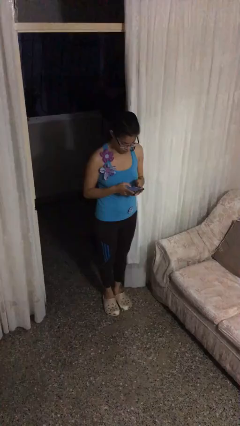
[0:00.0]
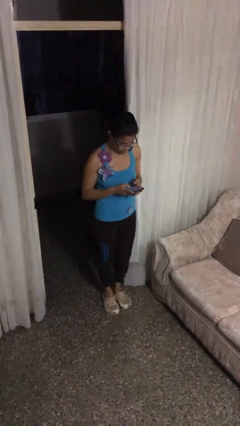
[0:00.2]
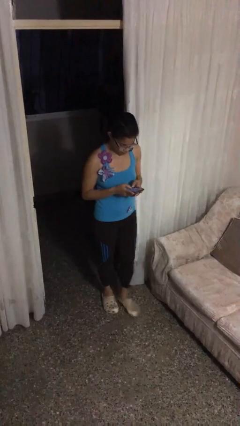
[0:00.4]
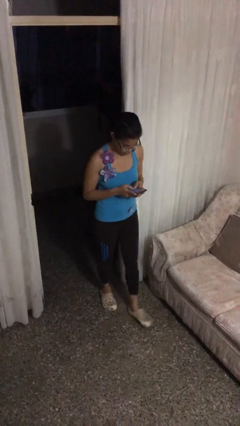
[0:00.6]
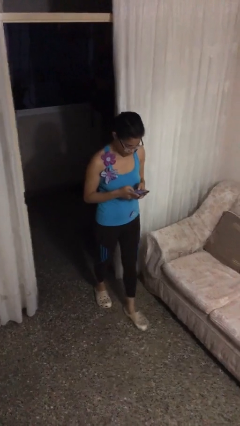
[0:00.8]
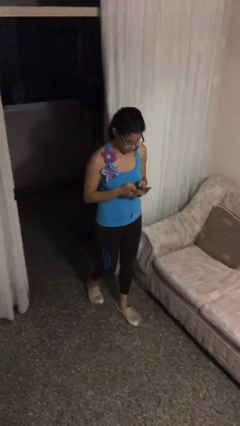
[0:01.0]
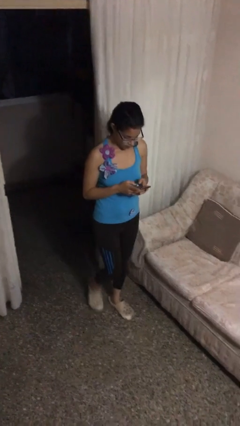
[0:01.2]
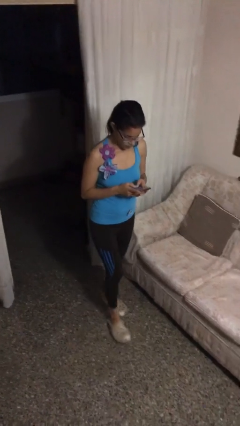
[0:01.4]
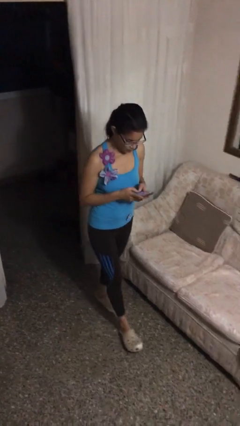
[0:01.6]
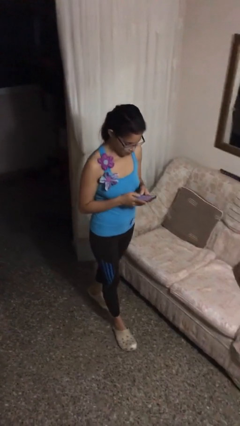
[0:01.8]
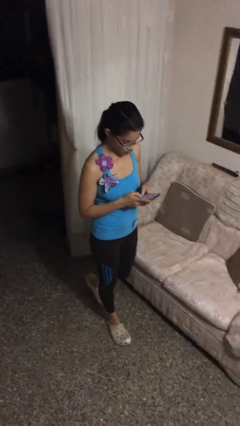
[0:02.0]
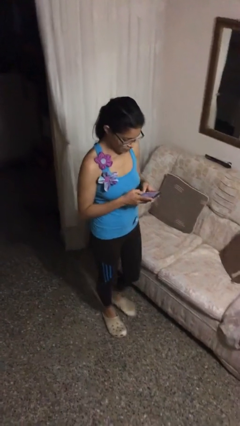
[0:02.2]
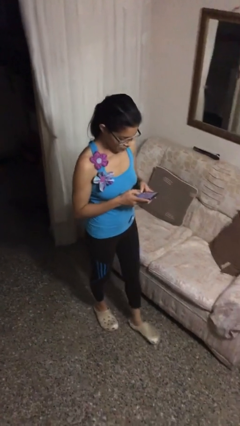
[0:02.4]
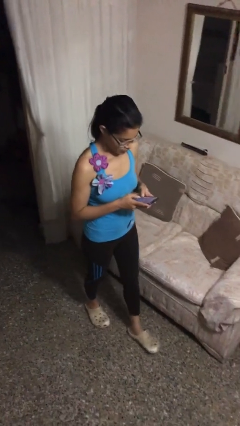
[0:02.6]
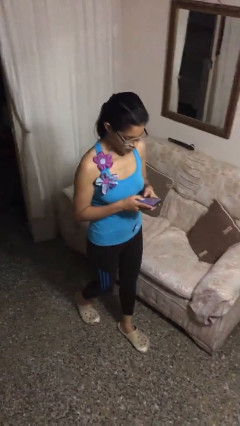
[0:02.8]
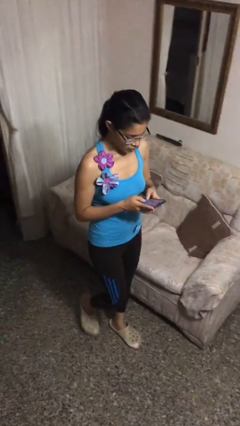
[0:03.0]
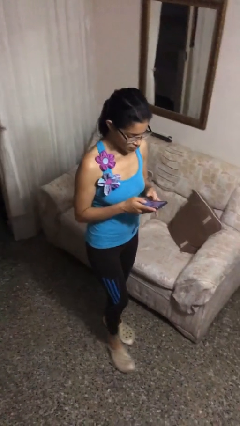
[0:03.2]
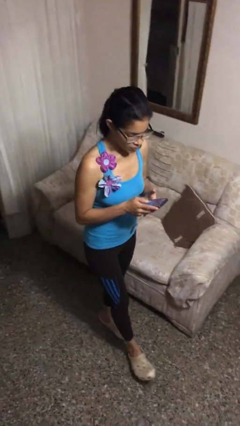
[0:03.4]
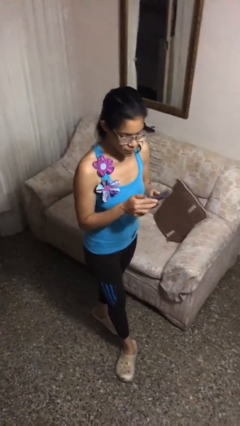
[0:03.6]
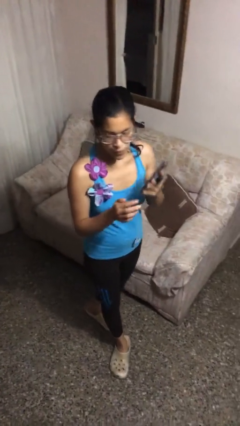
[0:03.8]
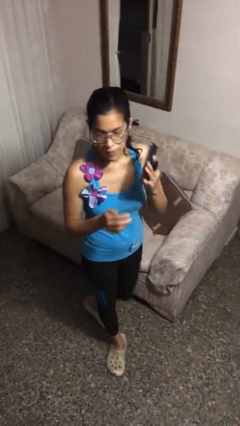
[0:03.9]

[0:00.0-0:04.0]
person texts on phone

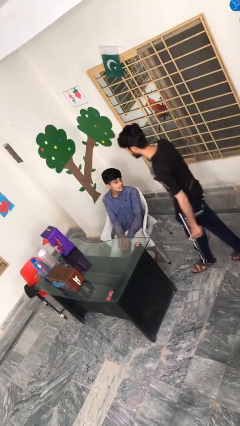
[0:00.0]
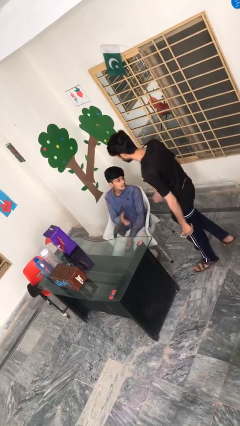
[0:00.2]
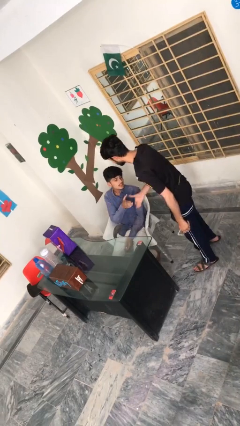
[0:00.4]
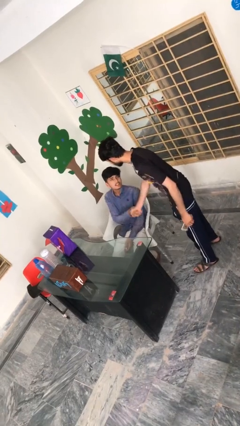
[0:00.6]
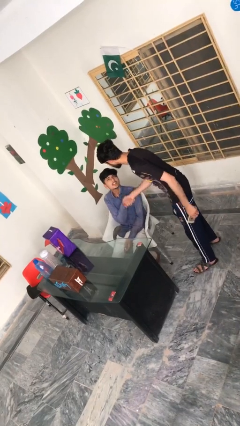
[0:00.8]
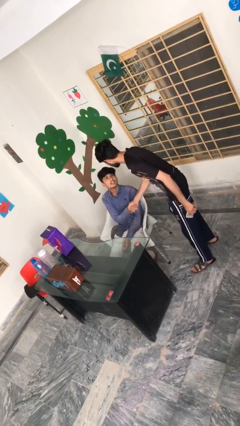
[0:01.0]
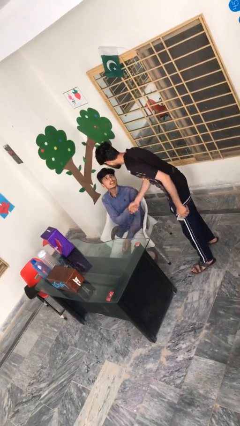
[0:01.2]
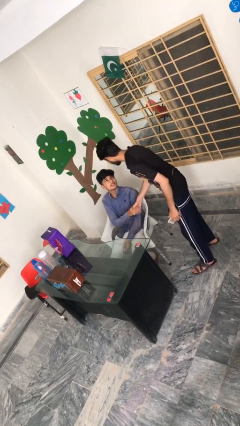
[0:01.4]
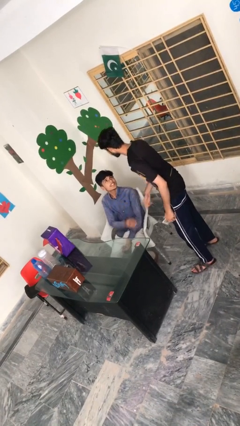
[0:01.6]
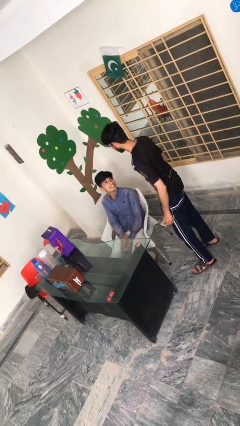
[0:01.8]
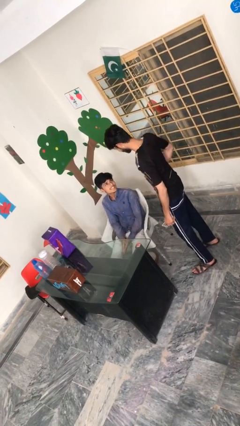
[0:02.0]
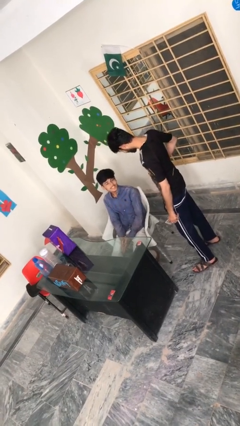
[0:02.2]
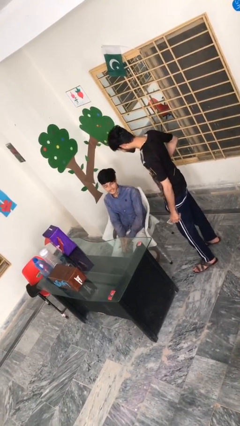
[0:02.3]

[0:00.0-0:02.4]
person shakes hand

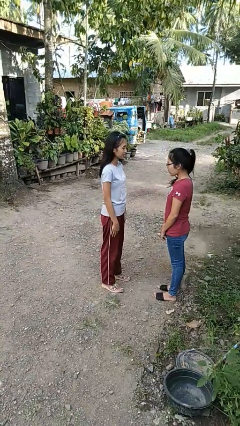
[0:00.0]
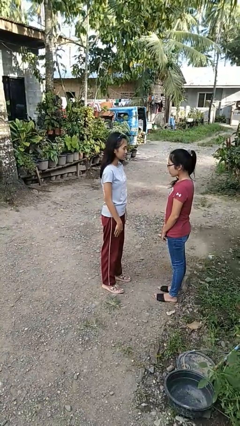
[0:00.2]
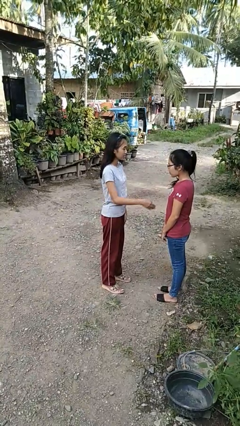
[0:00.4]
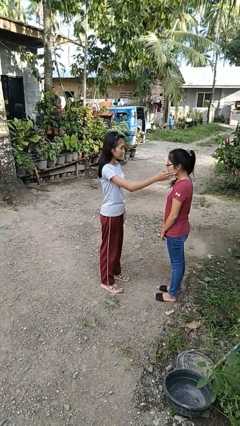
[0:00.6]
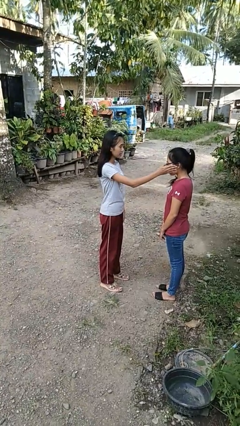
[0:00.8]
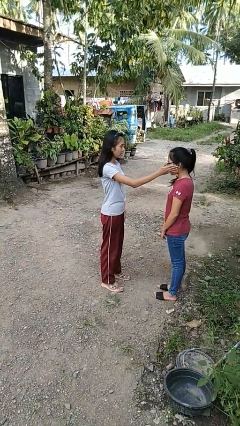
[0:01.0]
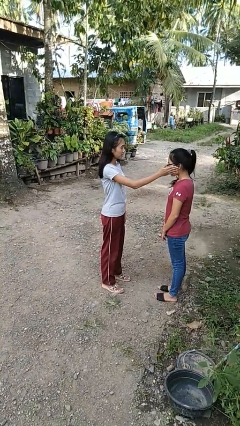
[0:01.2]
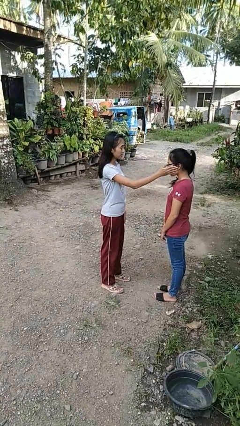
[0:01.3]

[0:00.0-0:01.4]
person touches face of person

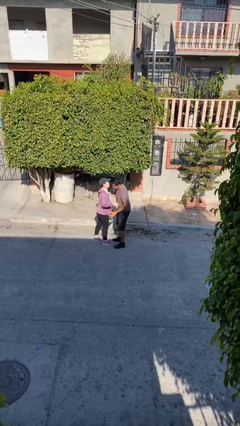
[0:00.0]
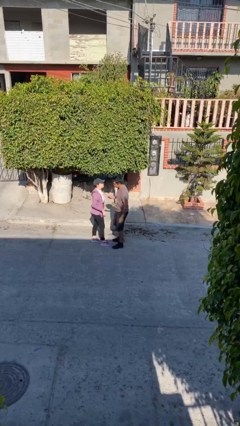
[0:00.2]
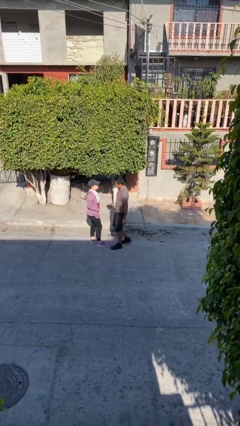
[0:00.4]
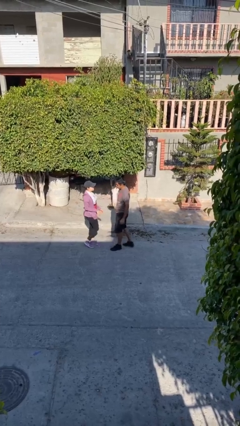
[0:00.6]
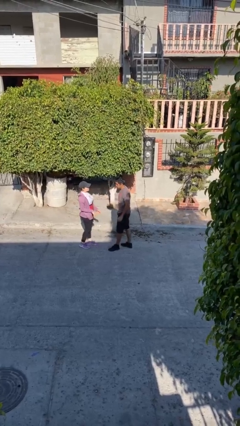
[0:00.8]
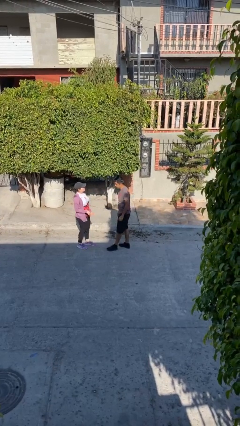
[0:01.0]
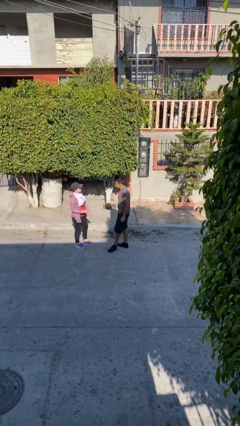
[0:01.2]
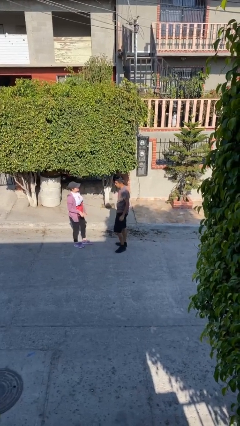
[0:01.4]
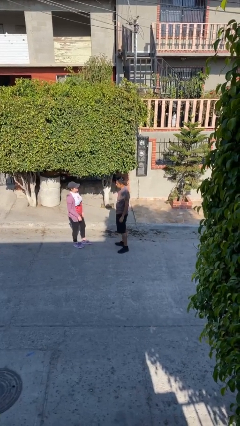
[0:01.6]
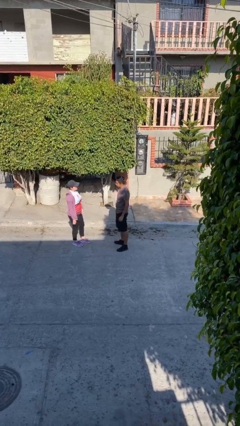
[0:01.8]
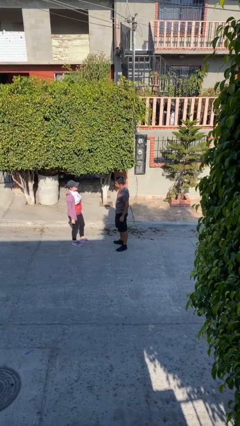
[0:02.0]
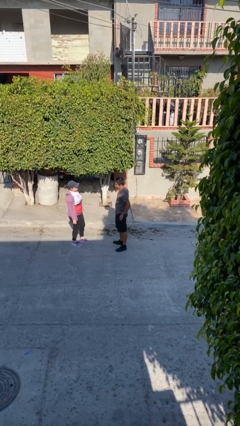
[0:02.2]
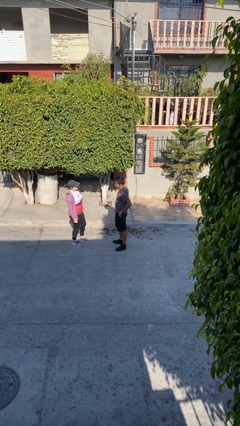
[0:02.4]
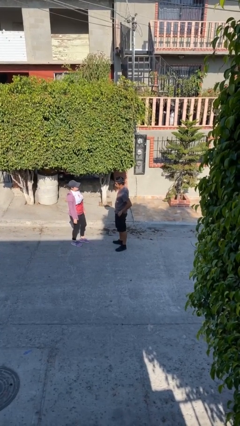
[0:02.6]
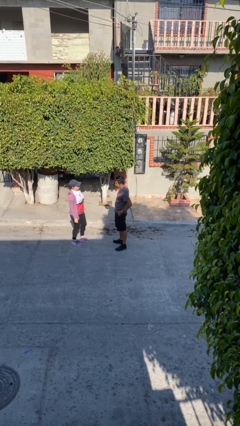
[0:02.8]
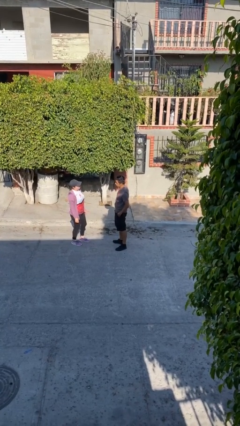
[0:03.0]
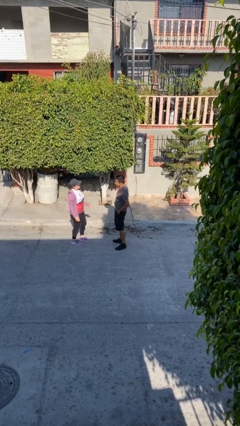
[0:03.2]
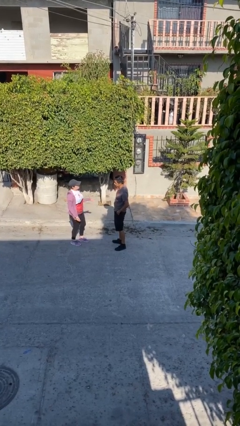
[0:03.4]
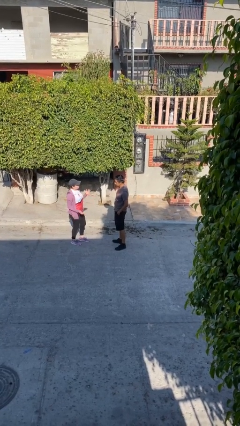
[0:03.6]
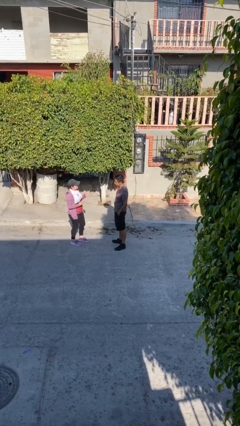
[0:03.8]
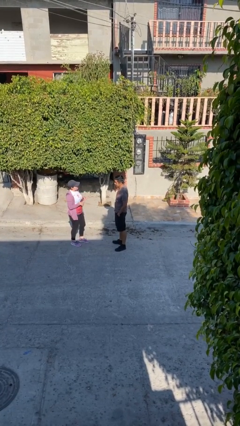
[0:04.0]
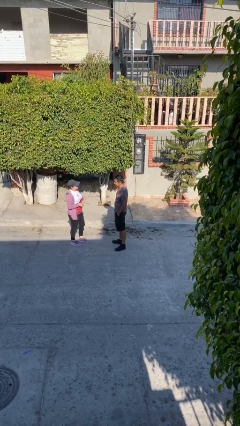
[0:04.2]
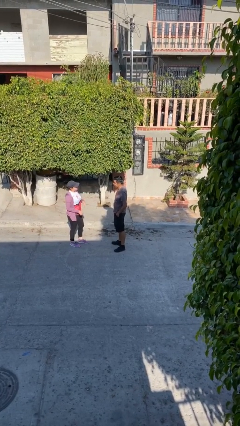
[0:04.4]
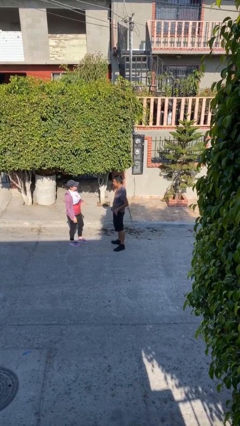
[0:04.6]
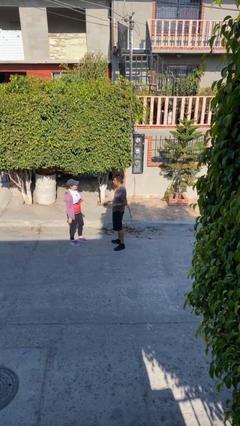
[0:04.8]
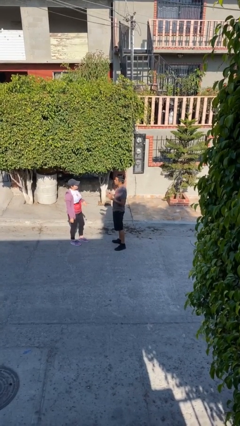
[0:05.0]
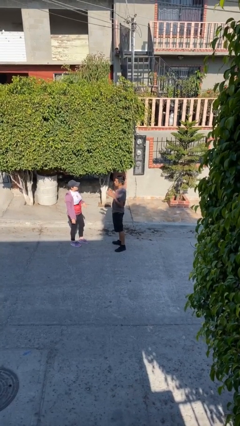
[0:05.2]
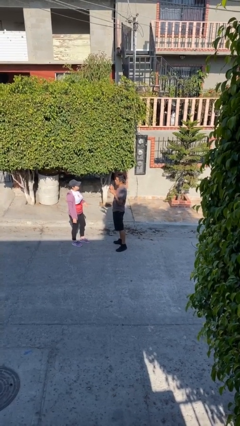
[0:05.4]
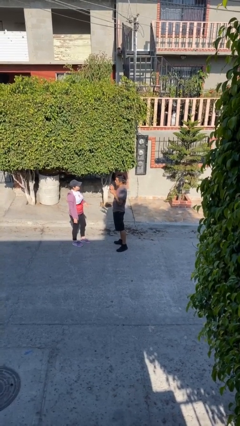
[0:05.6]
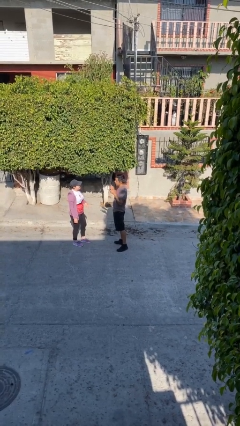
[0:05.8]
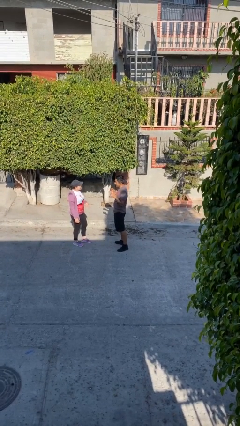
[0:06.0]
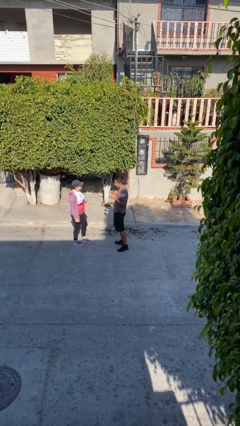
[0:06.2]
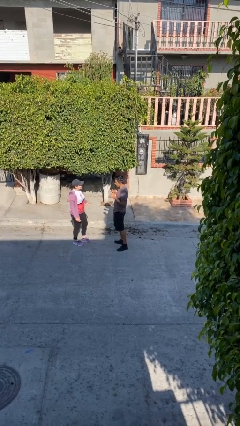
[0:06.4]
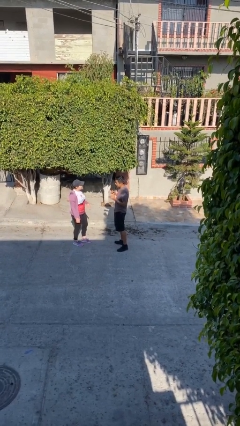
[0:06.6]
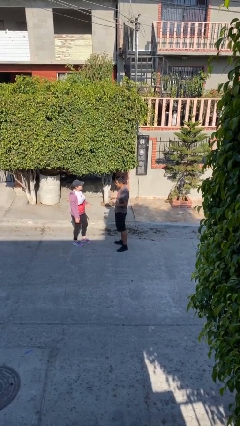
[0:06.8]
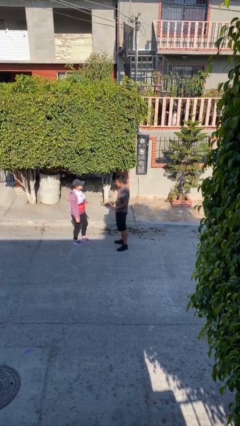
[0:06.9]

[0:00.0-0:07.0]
person talks to person

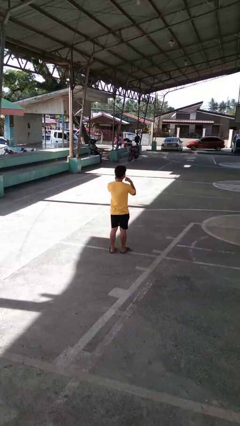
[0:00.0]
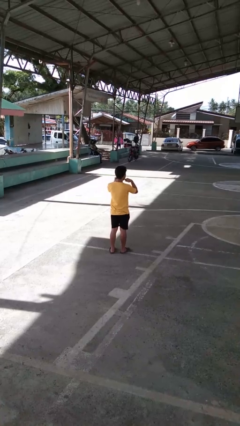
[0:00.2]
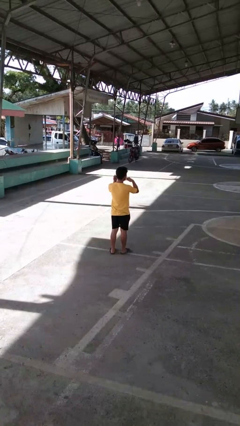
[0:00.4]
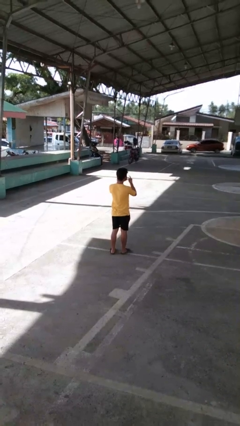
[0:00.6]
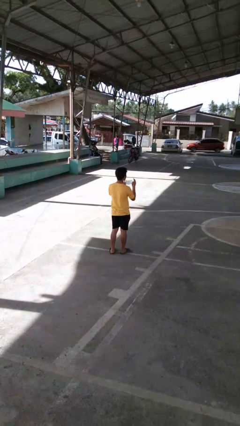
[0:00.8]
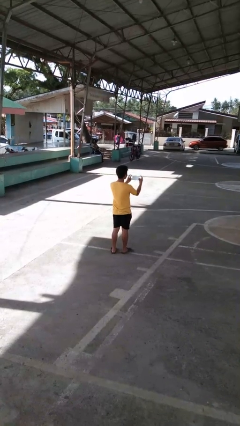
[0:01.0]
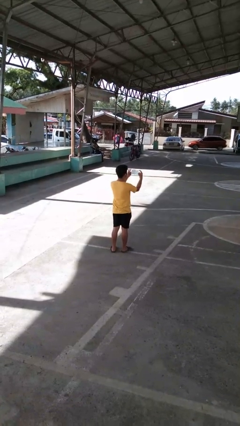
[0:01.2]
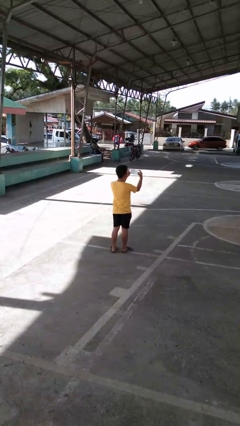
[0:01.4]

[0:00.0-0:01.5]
person takes off facemask

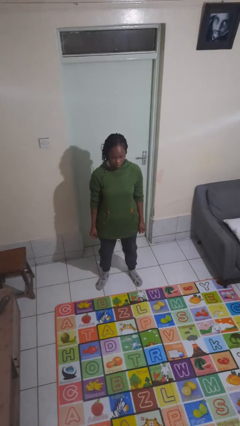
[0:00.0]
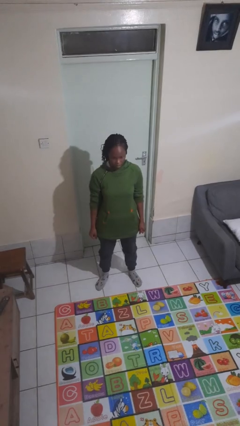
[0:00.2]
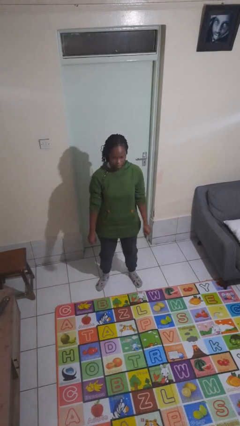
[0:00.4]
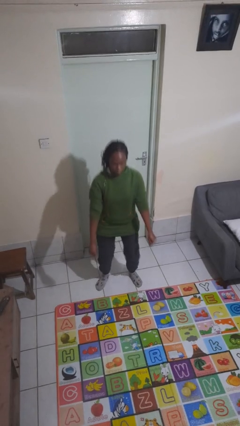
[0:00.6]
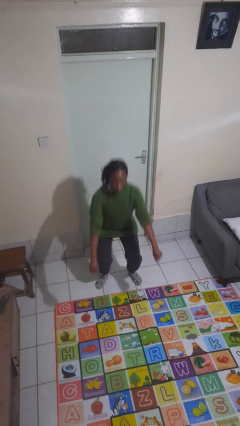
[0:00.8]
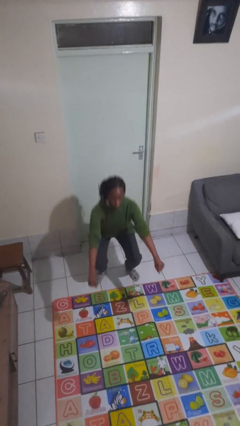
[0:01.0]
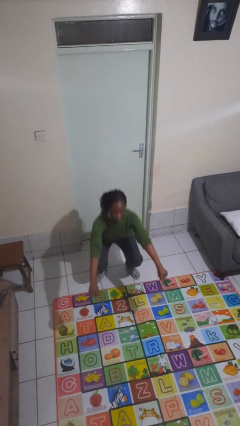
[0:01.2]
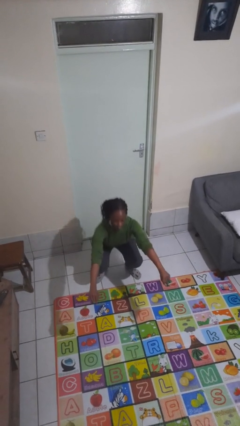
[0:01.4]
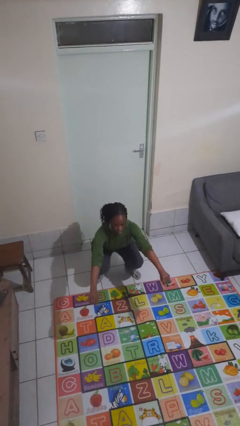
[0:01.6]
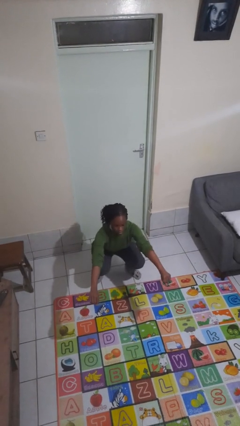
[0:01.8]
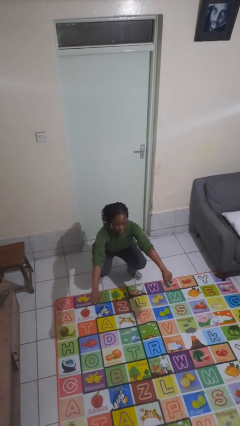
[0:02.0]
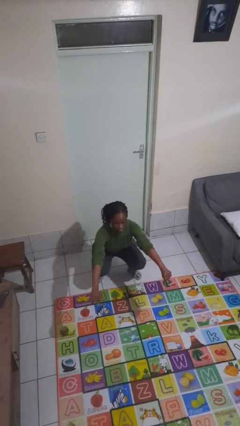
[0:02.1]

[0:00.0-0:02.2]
person squats
